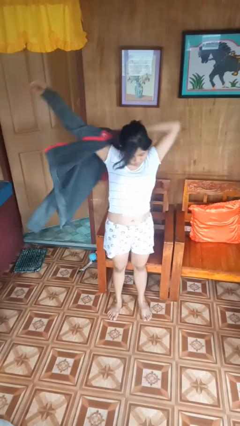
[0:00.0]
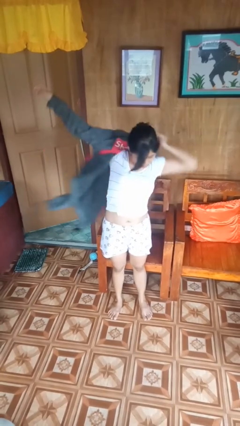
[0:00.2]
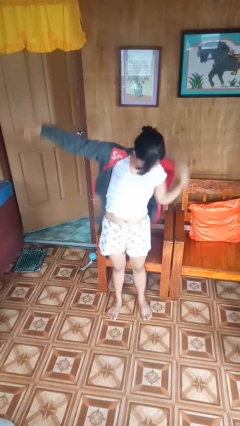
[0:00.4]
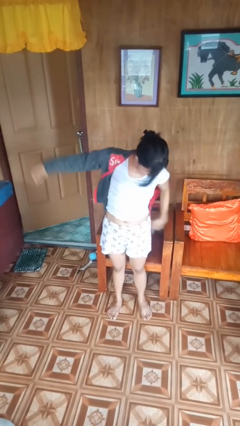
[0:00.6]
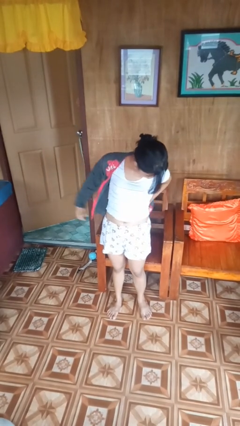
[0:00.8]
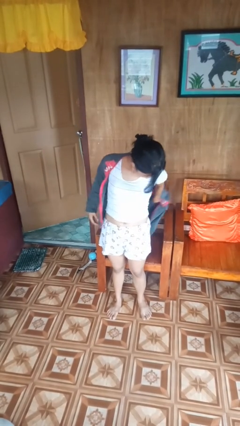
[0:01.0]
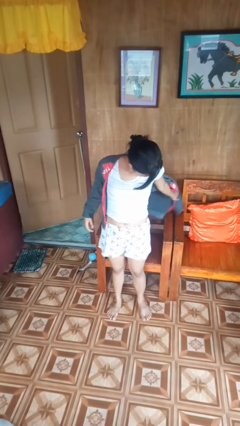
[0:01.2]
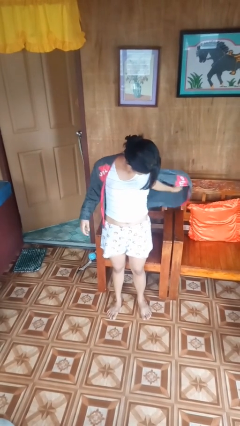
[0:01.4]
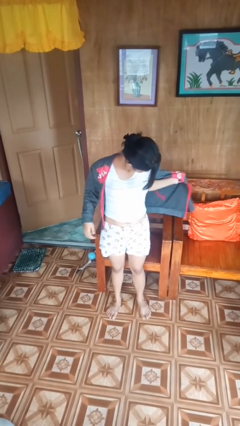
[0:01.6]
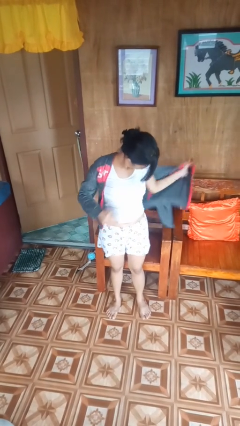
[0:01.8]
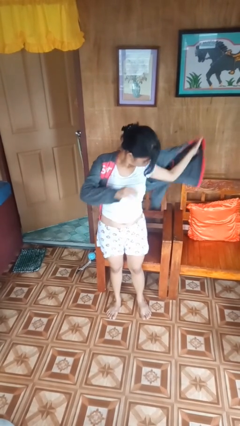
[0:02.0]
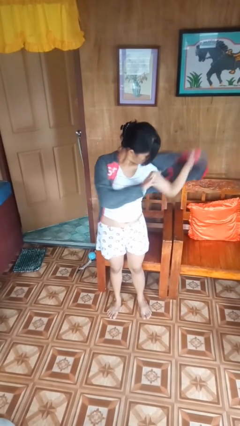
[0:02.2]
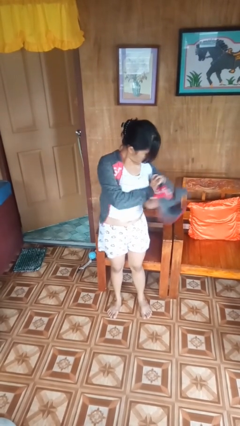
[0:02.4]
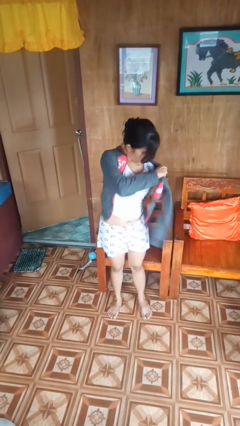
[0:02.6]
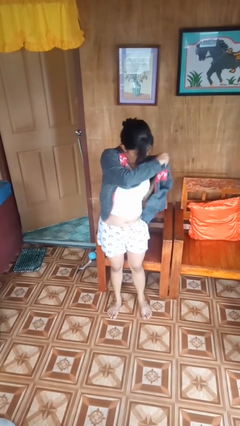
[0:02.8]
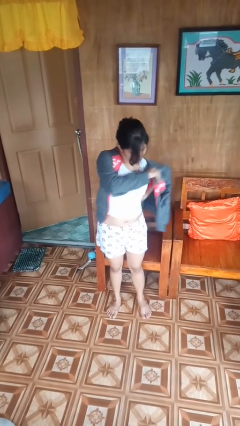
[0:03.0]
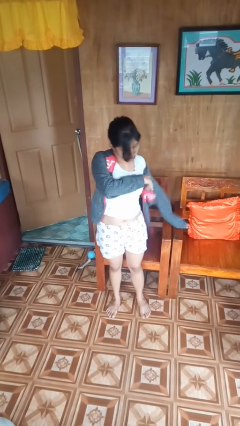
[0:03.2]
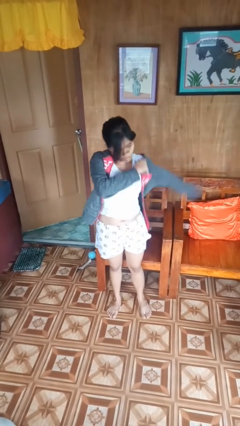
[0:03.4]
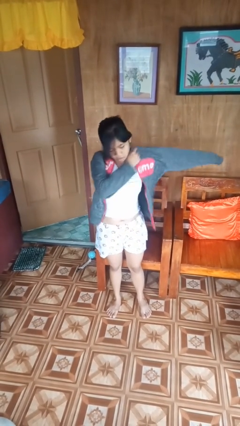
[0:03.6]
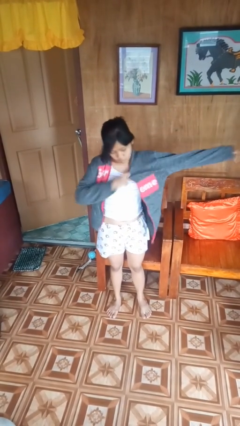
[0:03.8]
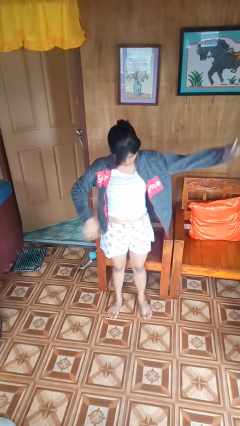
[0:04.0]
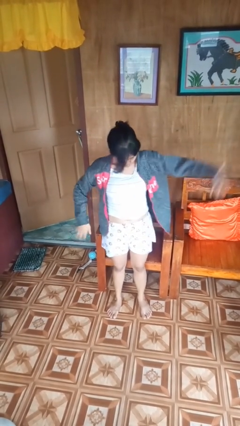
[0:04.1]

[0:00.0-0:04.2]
person puts on jacket

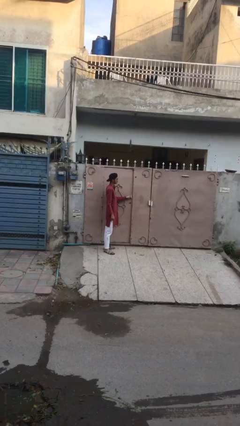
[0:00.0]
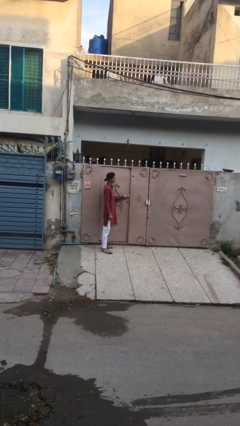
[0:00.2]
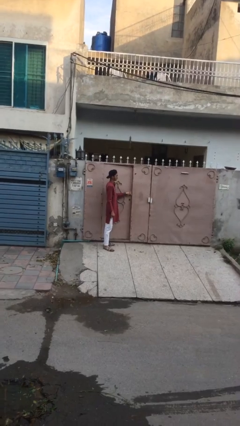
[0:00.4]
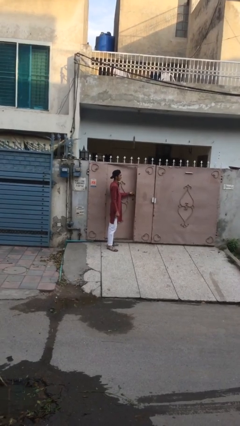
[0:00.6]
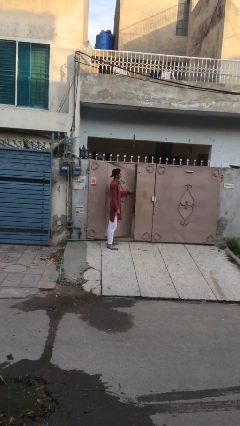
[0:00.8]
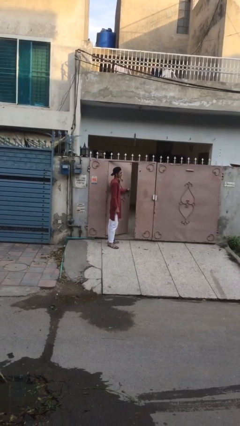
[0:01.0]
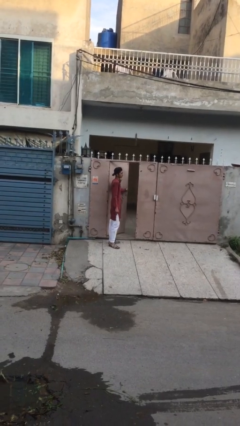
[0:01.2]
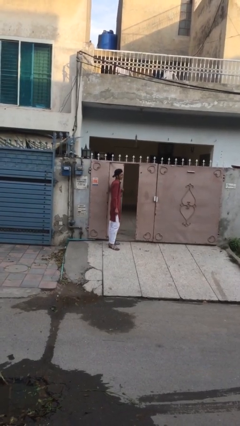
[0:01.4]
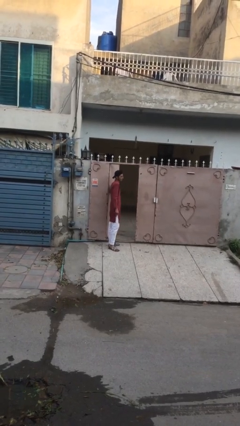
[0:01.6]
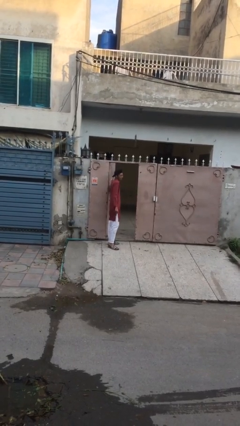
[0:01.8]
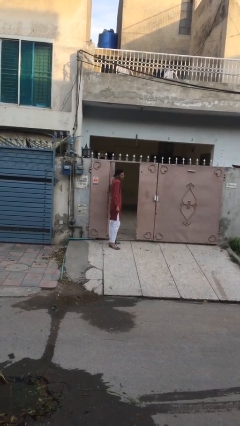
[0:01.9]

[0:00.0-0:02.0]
person opens facility door

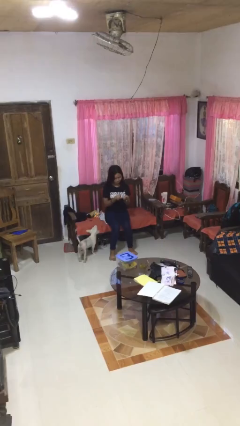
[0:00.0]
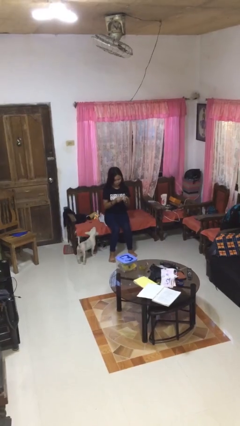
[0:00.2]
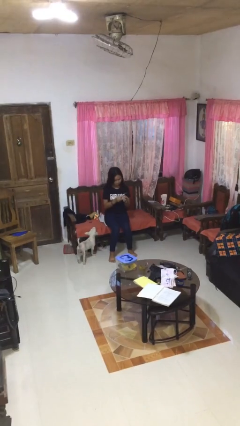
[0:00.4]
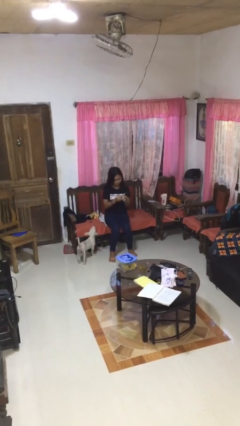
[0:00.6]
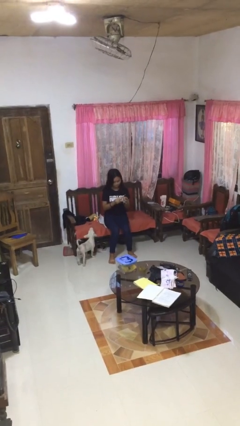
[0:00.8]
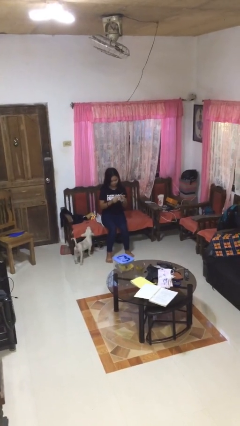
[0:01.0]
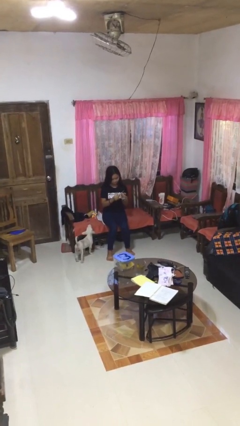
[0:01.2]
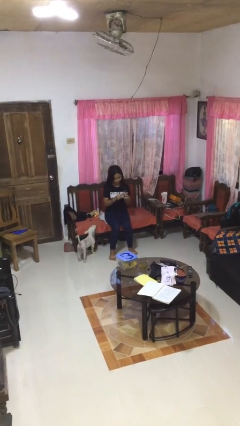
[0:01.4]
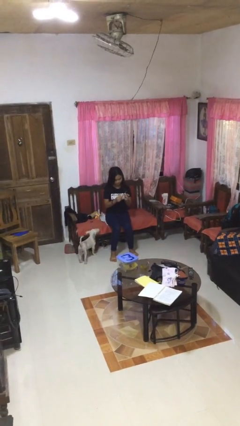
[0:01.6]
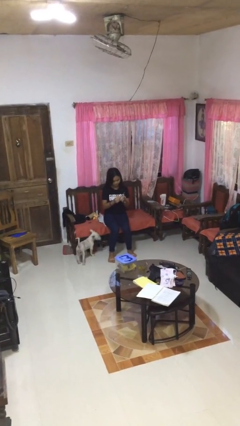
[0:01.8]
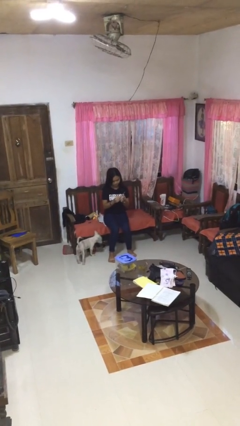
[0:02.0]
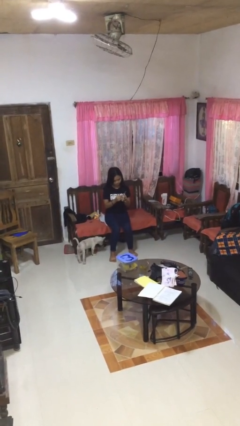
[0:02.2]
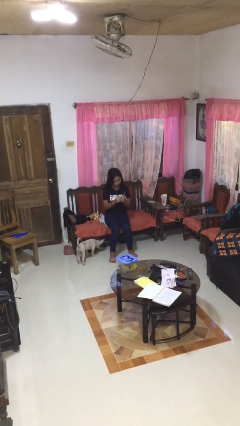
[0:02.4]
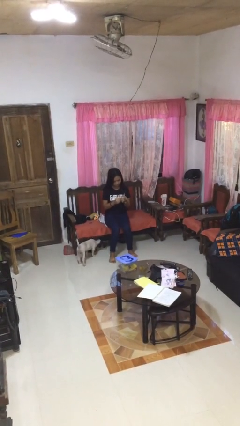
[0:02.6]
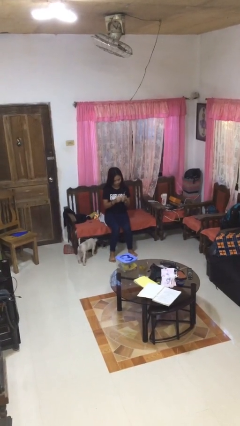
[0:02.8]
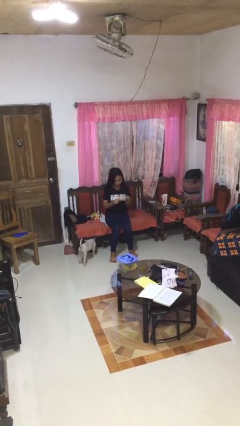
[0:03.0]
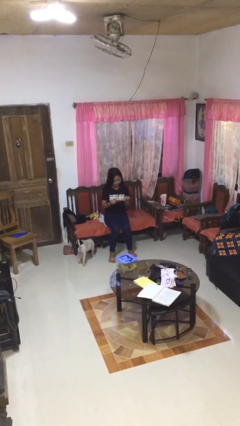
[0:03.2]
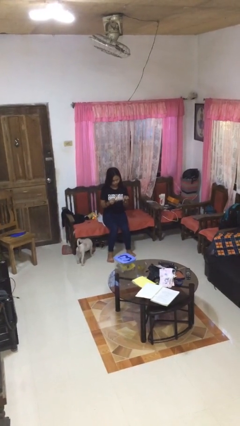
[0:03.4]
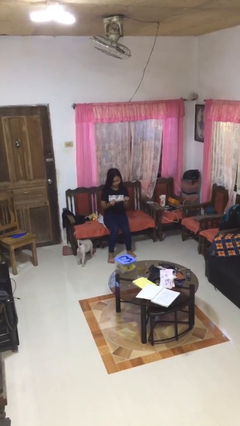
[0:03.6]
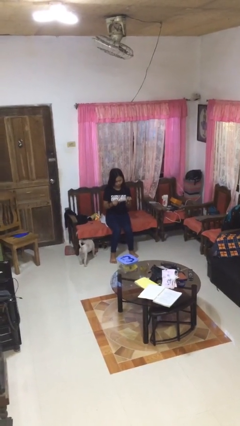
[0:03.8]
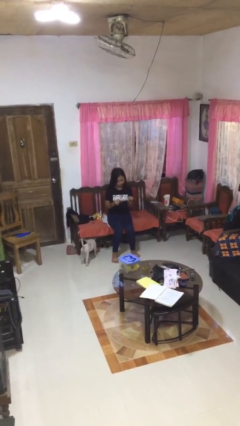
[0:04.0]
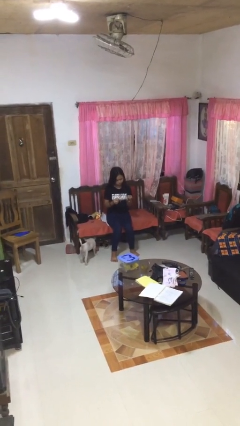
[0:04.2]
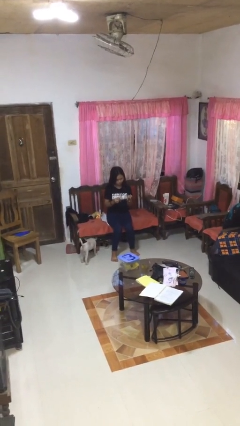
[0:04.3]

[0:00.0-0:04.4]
person files fingernails

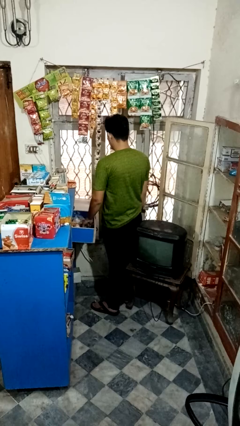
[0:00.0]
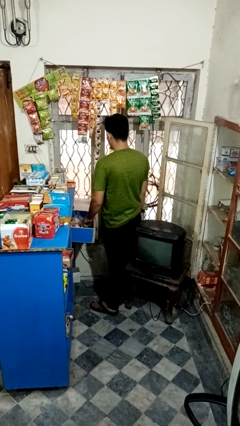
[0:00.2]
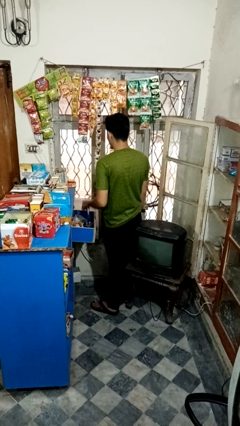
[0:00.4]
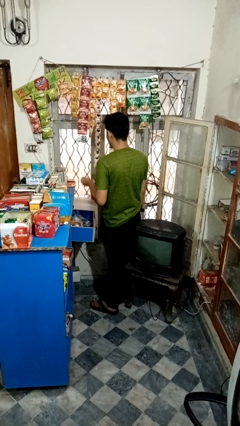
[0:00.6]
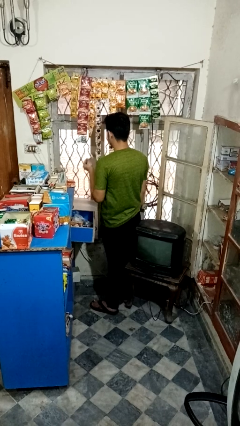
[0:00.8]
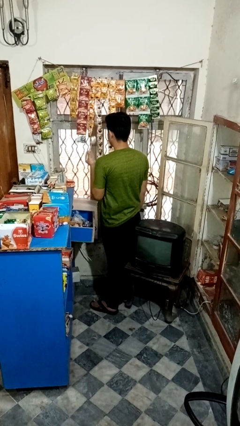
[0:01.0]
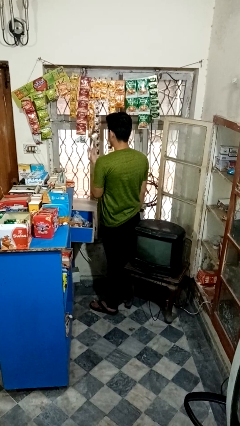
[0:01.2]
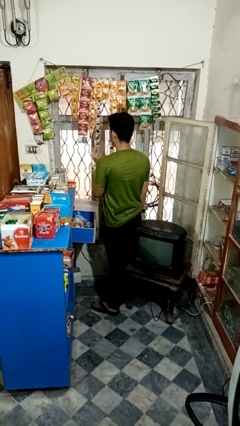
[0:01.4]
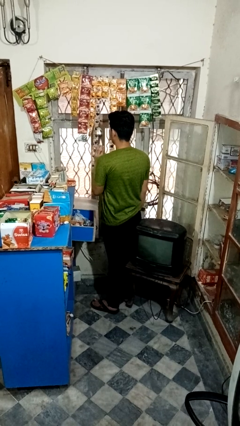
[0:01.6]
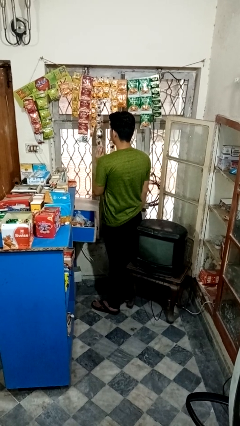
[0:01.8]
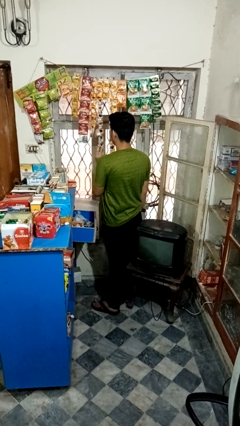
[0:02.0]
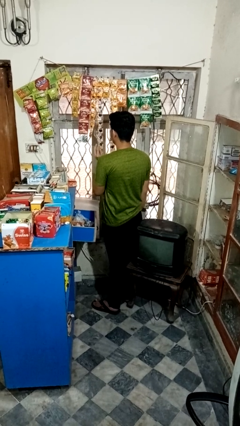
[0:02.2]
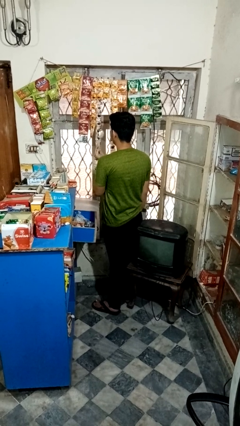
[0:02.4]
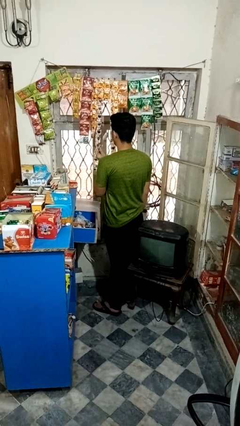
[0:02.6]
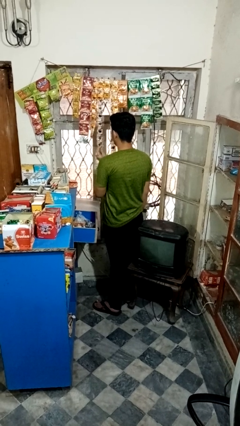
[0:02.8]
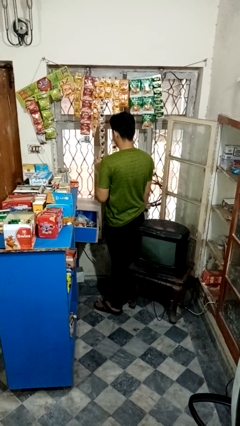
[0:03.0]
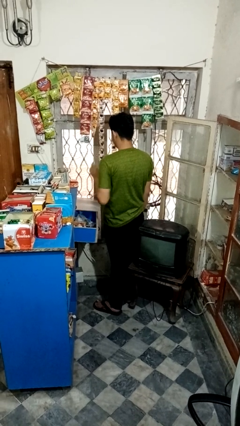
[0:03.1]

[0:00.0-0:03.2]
person takes object from kitchen drawer

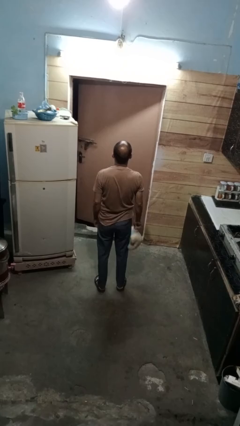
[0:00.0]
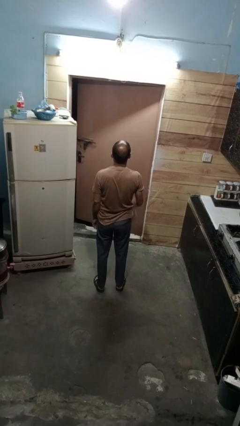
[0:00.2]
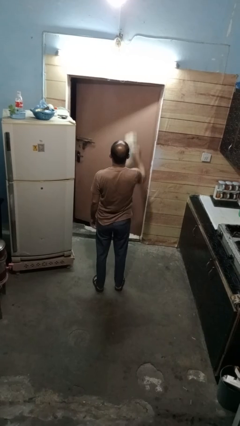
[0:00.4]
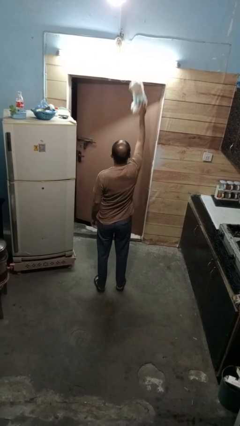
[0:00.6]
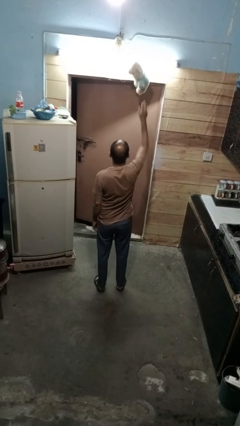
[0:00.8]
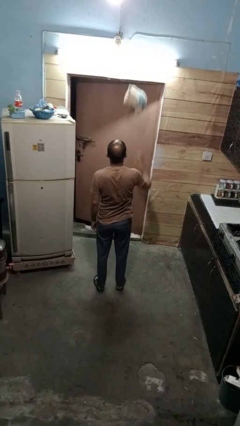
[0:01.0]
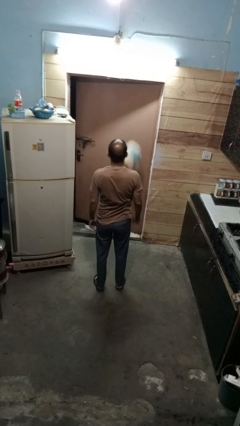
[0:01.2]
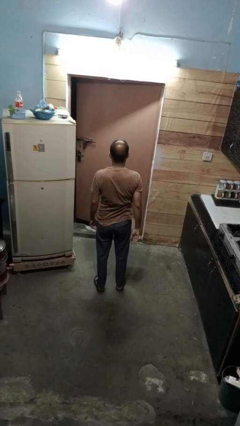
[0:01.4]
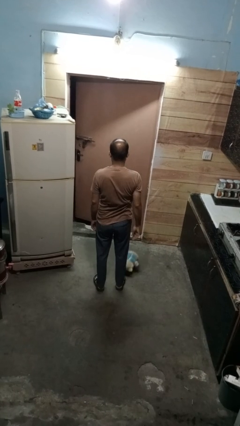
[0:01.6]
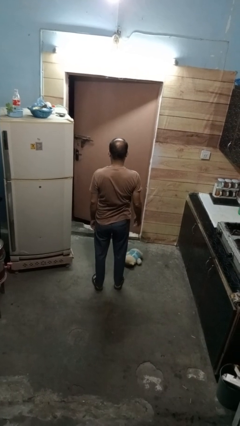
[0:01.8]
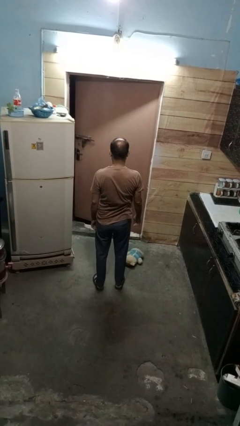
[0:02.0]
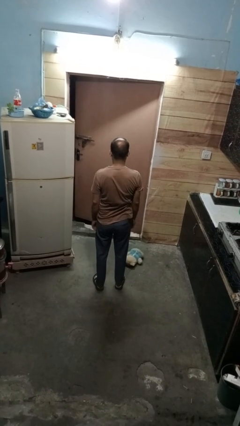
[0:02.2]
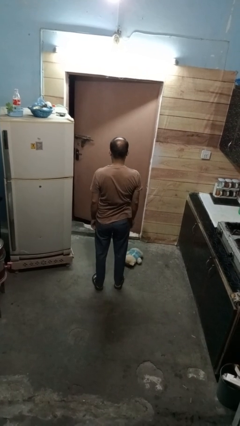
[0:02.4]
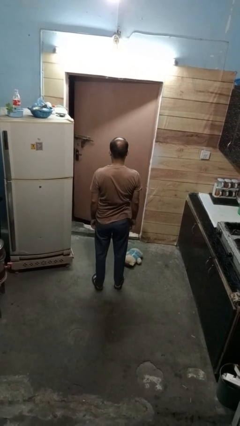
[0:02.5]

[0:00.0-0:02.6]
person throws object into air

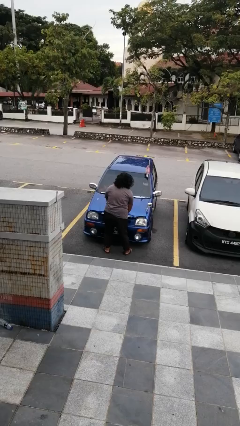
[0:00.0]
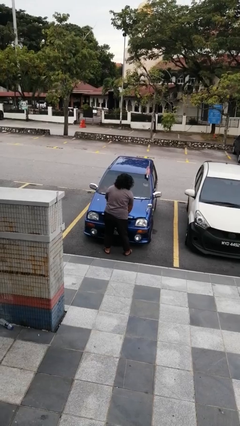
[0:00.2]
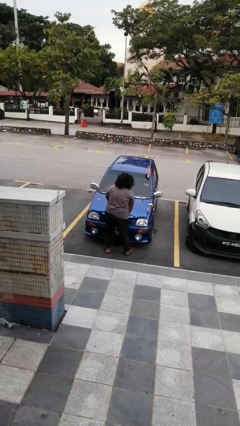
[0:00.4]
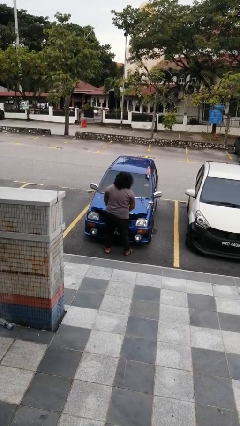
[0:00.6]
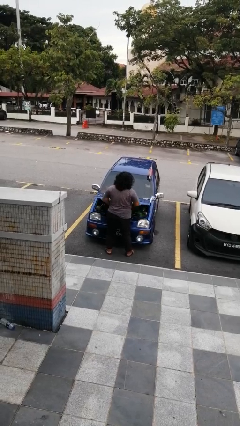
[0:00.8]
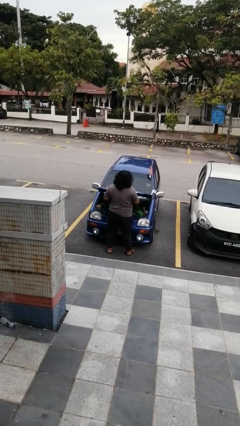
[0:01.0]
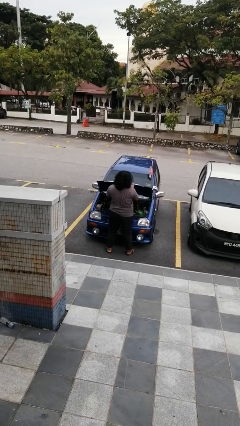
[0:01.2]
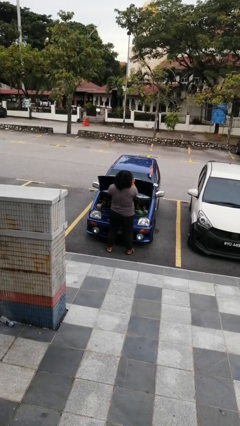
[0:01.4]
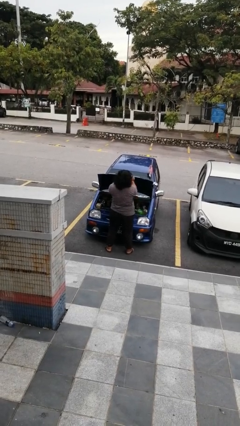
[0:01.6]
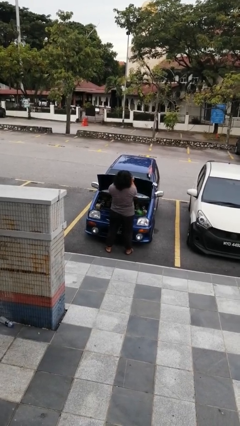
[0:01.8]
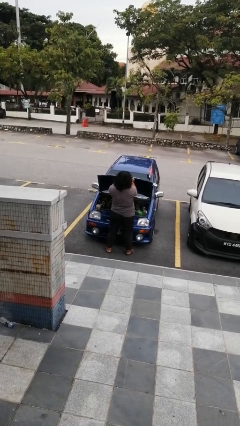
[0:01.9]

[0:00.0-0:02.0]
person opens car hood
